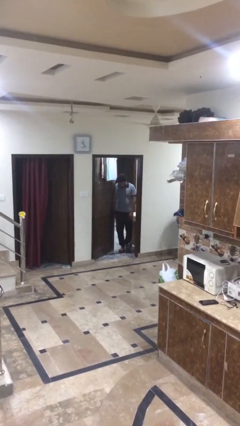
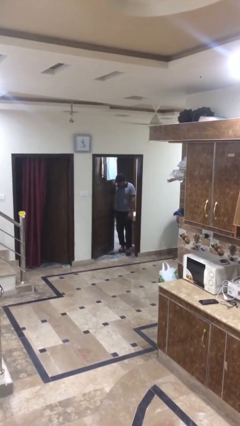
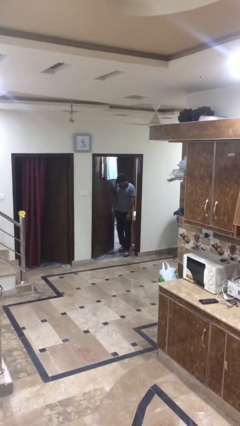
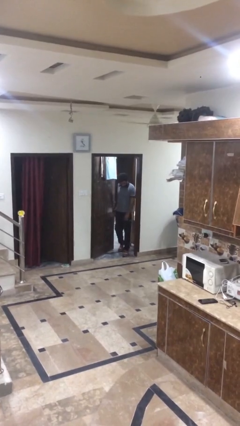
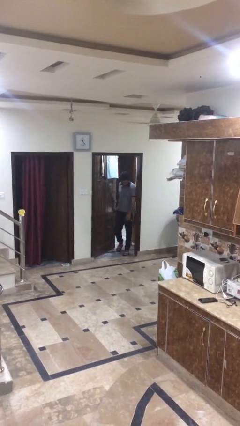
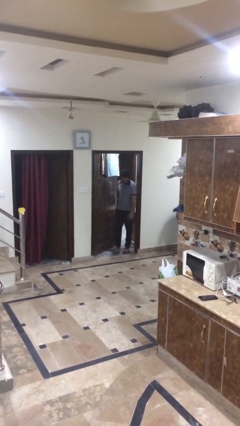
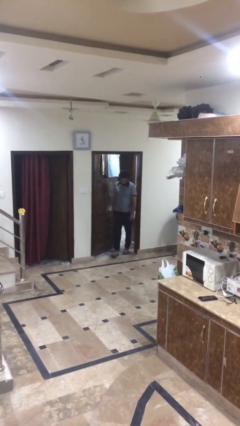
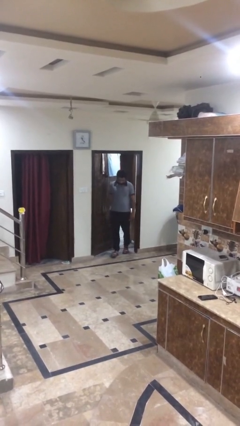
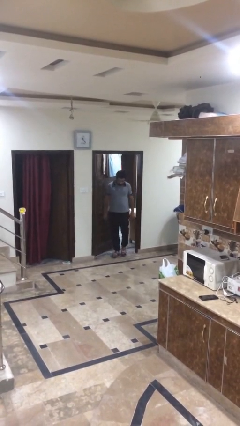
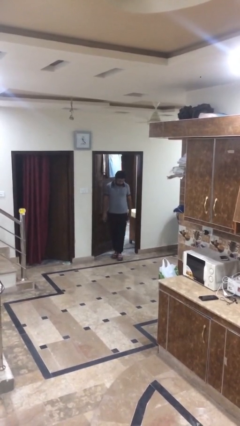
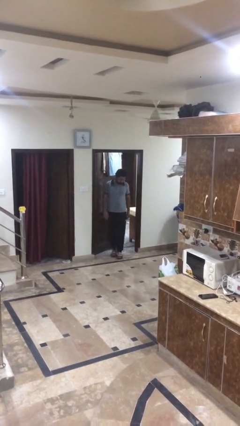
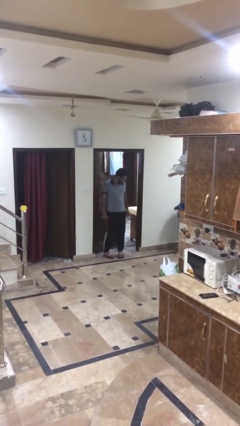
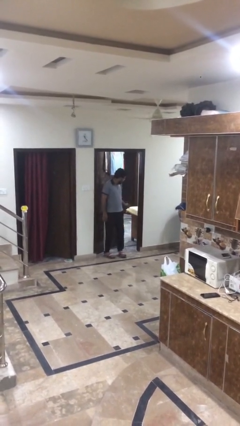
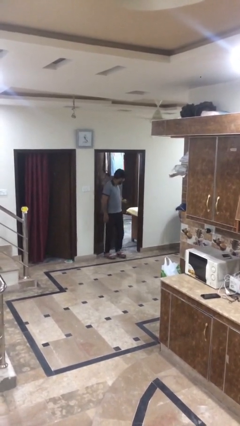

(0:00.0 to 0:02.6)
person enters scene through structure

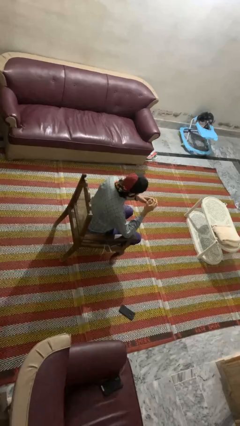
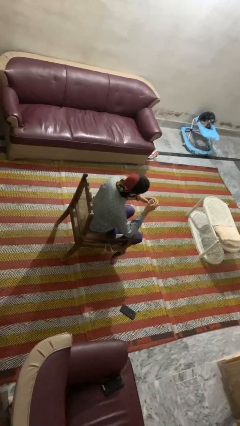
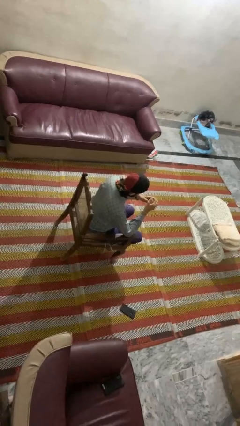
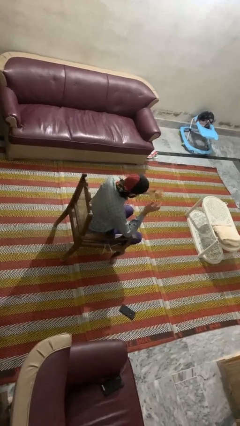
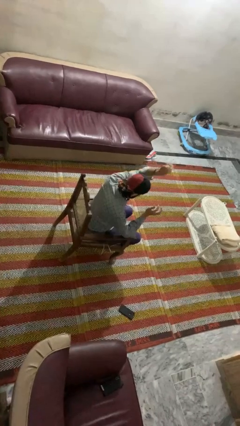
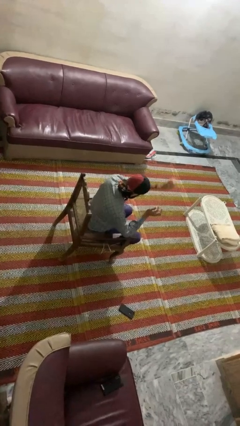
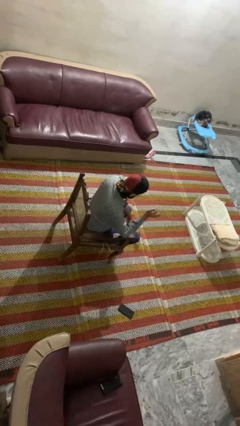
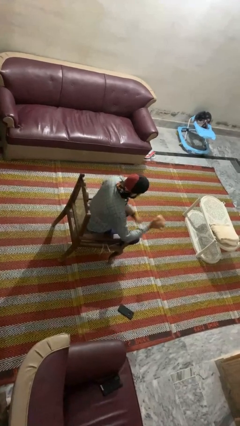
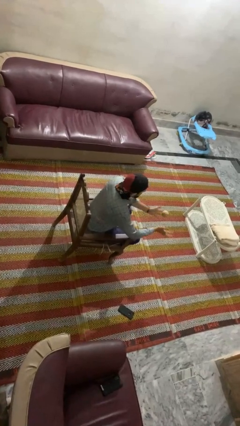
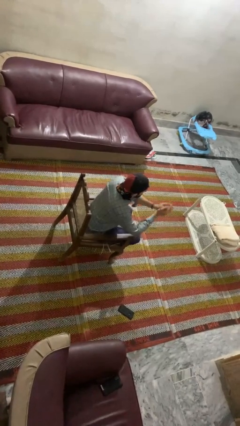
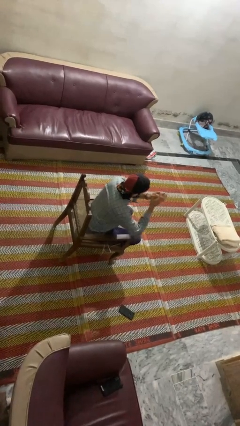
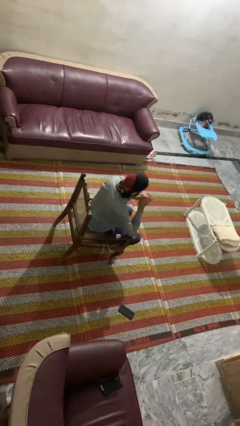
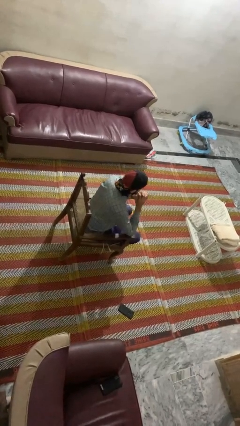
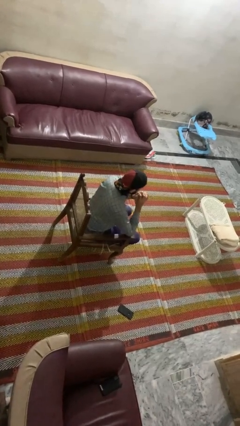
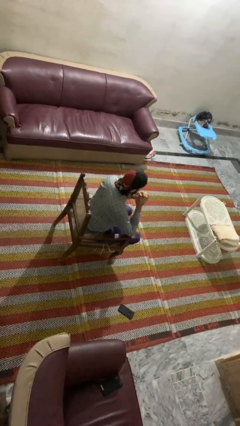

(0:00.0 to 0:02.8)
person bounces ball on floor

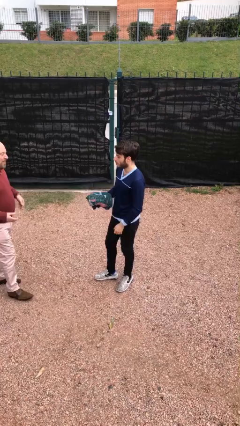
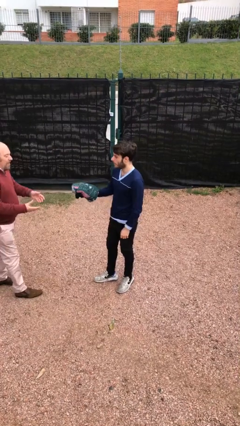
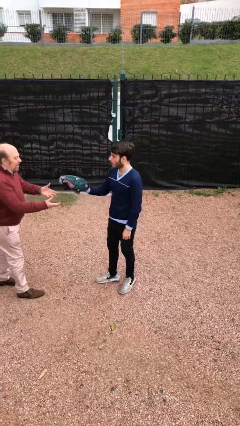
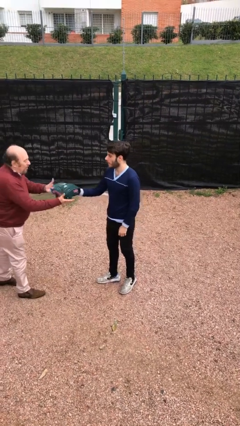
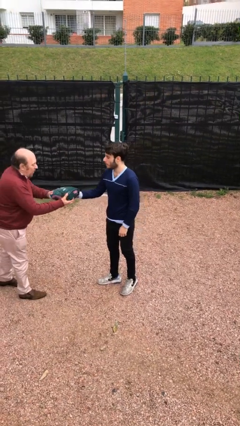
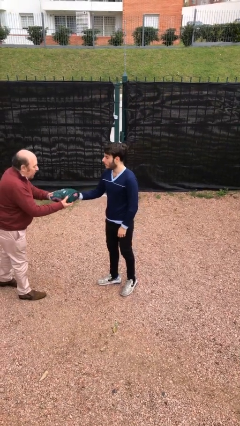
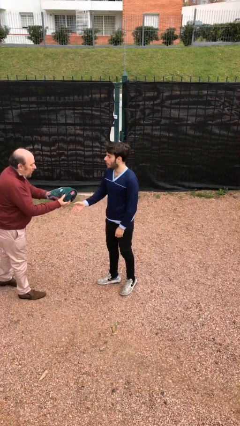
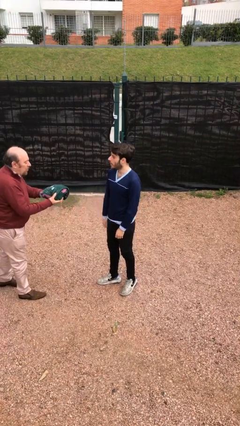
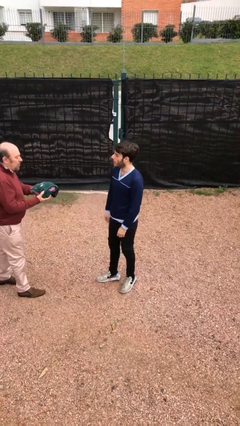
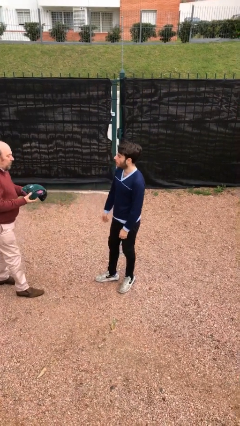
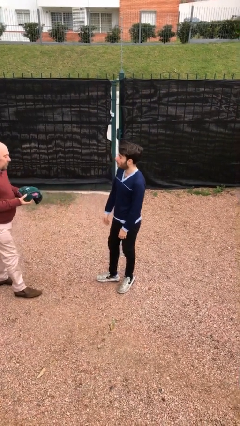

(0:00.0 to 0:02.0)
person transfers object to person

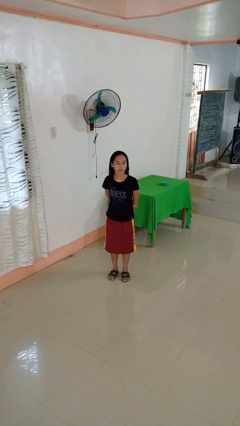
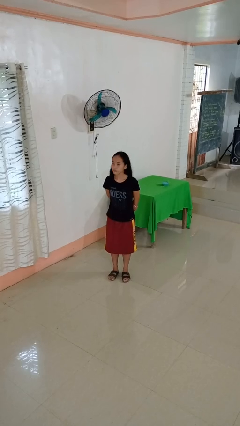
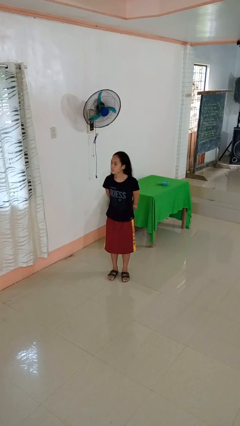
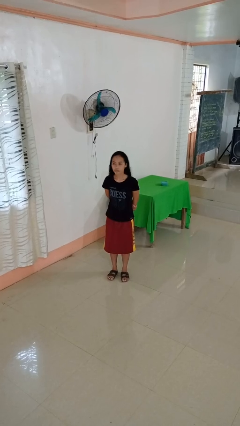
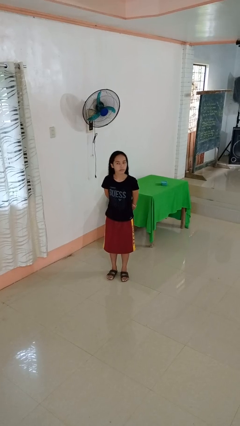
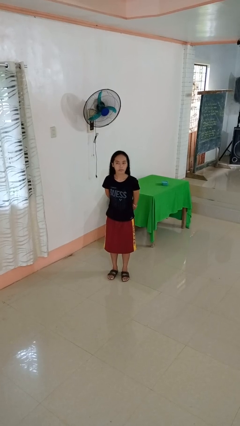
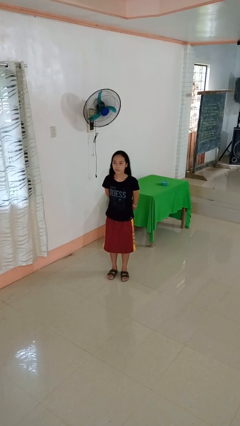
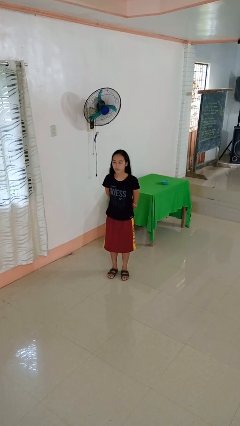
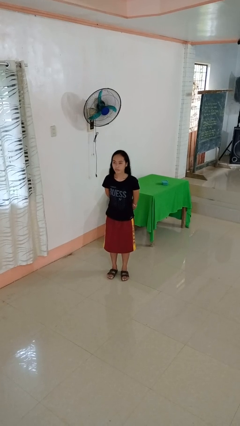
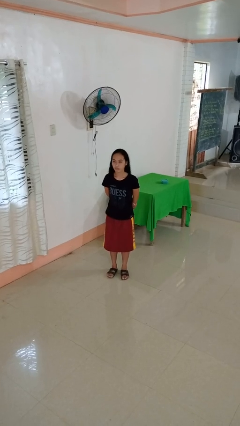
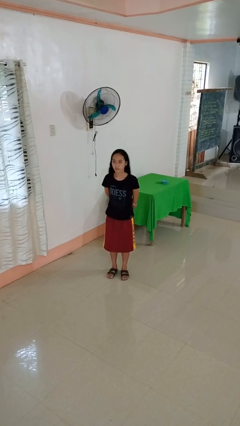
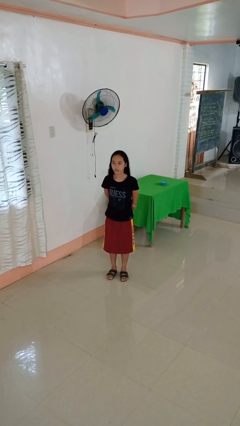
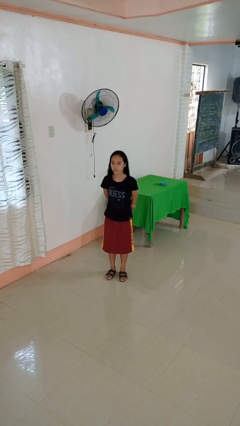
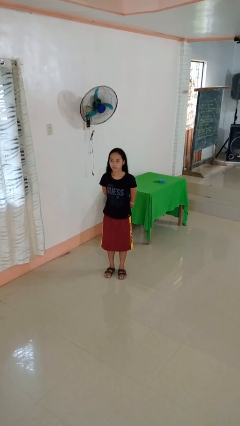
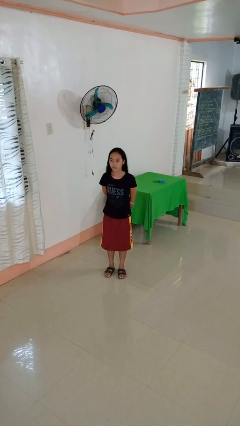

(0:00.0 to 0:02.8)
person shakes head

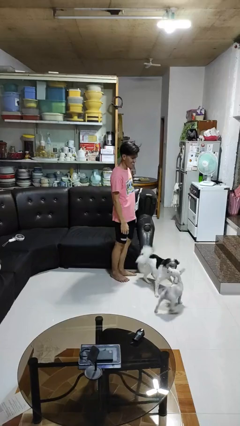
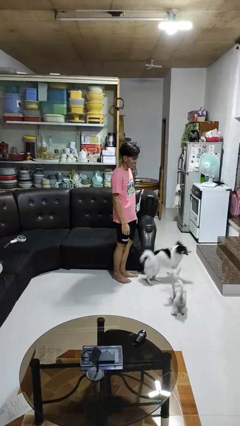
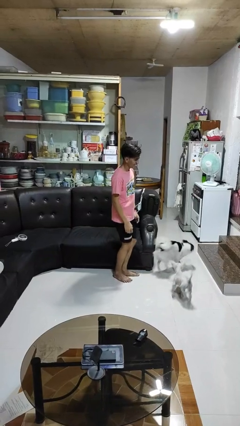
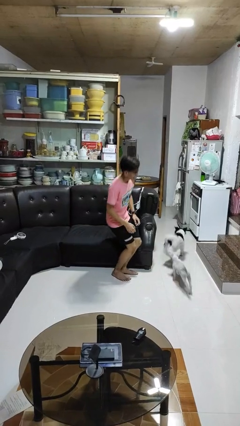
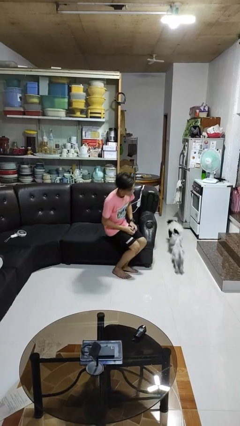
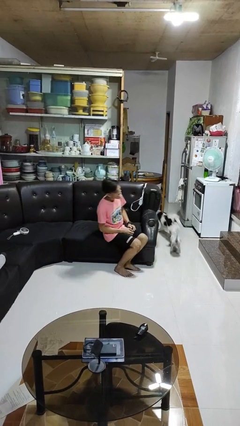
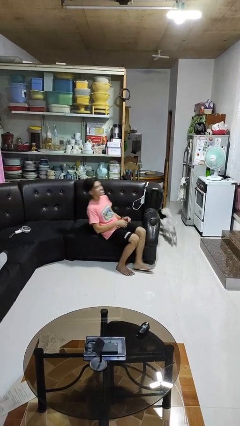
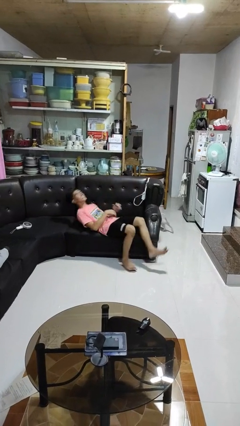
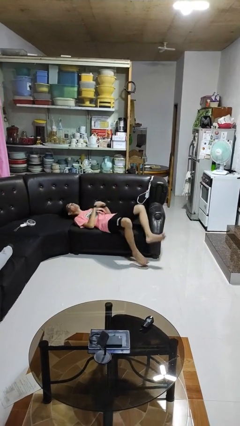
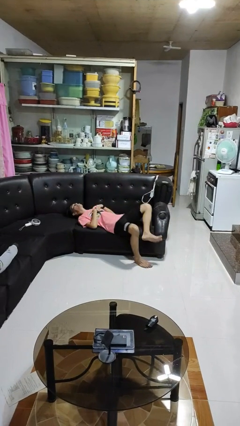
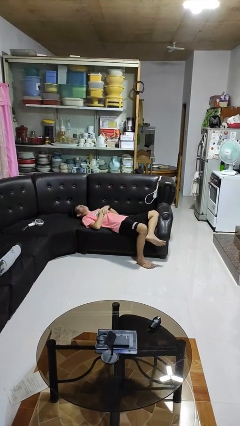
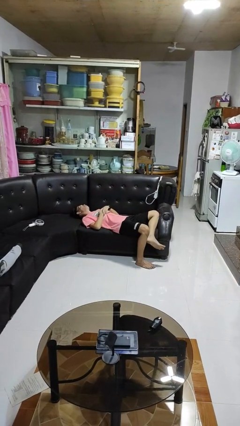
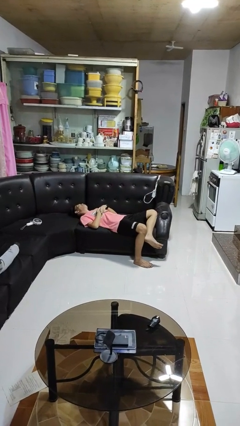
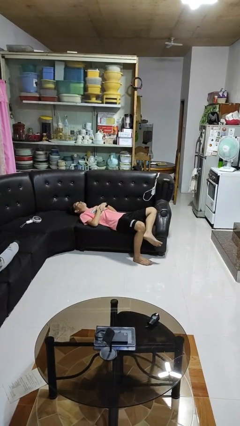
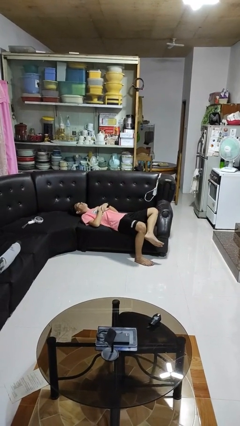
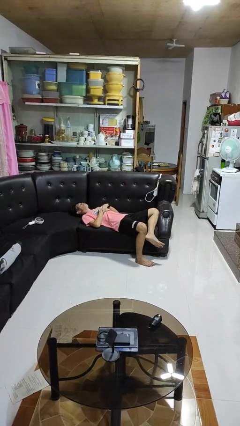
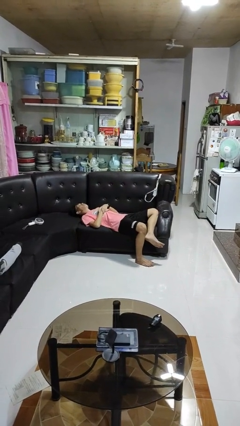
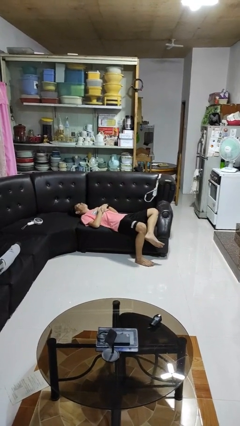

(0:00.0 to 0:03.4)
person lies down on couch

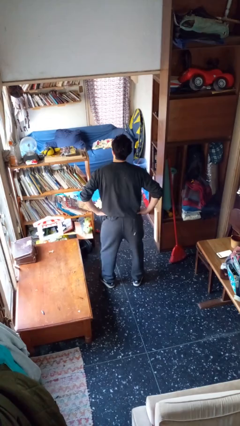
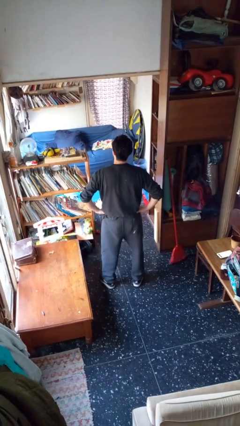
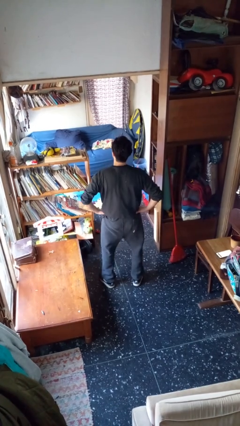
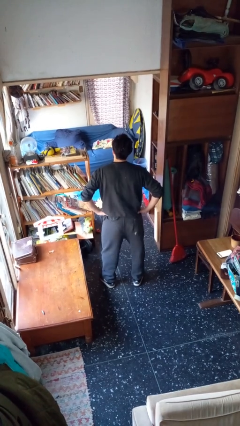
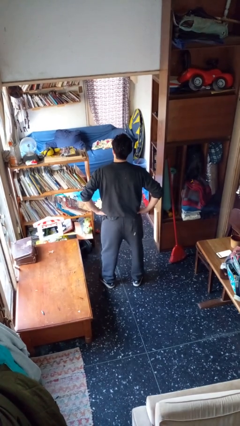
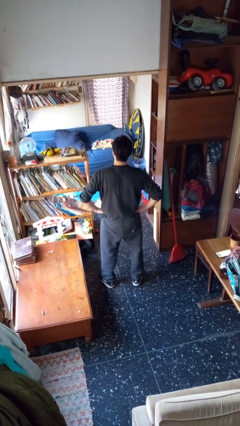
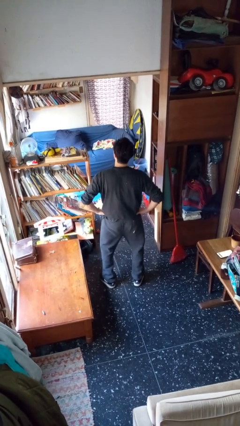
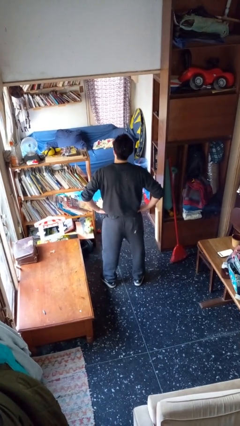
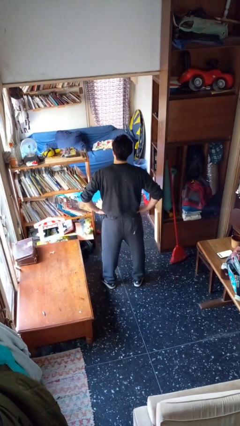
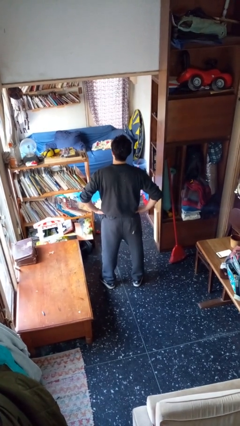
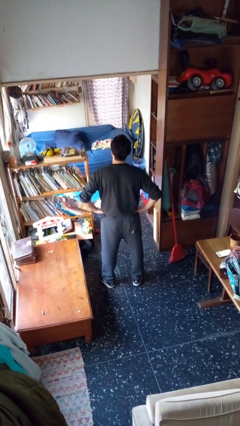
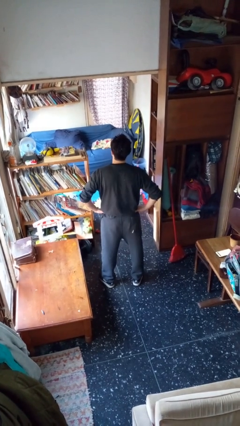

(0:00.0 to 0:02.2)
person wiggles hips

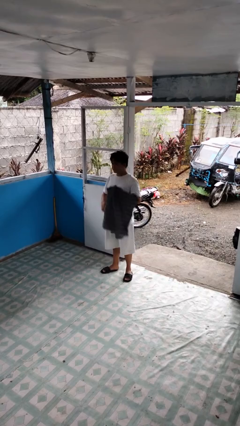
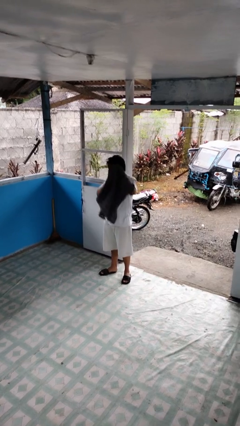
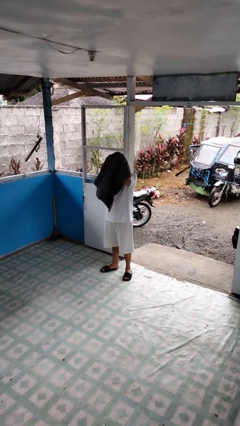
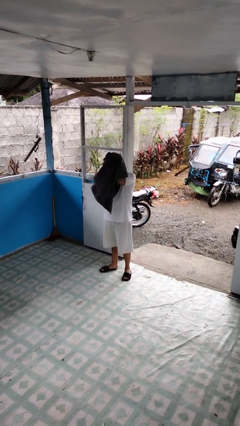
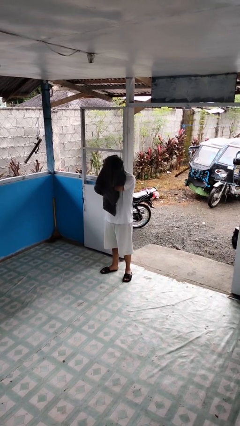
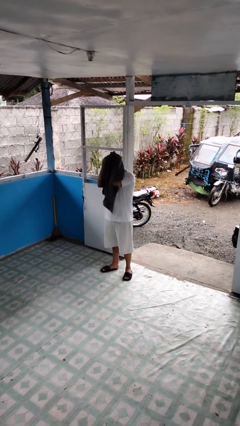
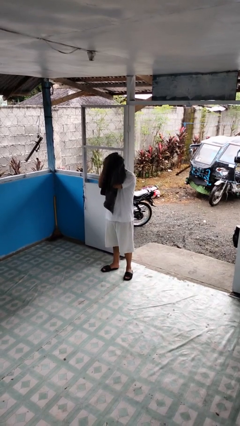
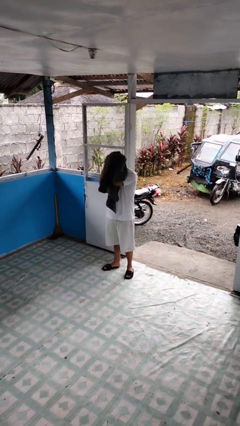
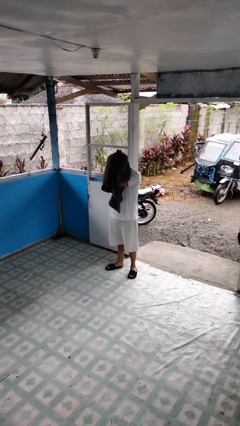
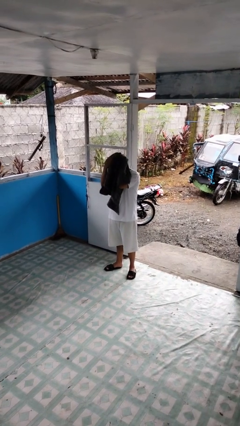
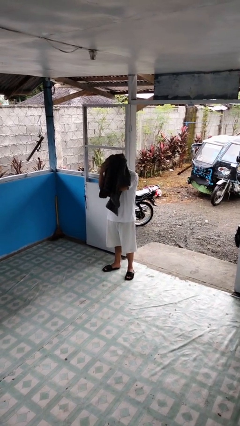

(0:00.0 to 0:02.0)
person dries hair with towel
